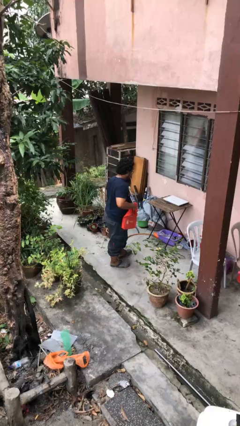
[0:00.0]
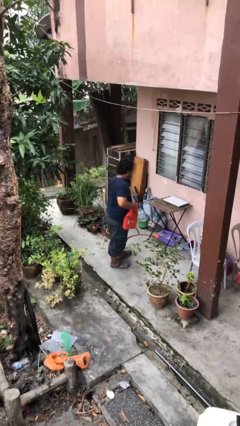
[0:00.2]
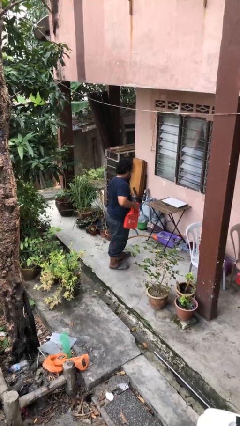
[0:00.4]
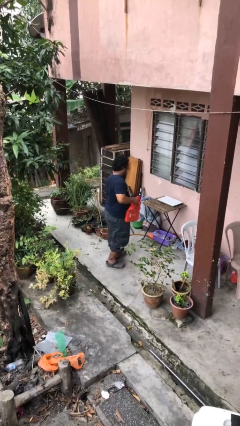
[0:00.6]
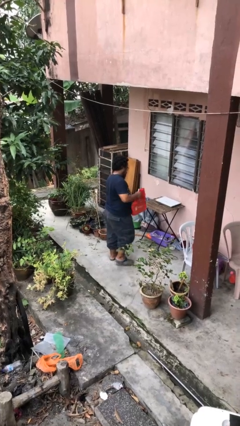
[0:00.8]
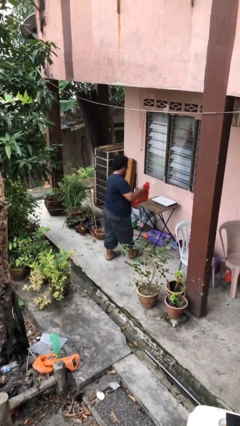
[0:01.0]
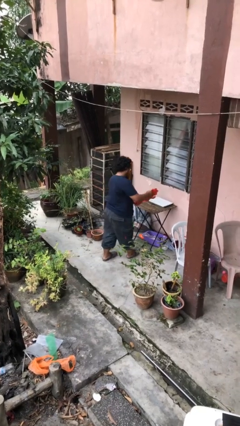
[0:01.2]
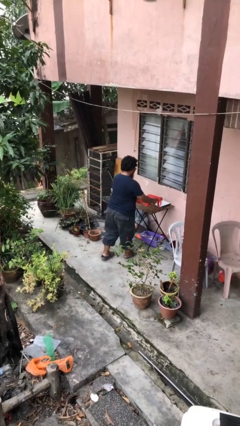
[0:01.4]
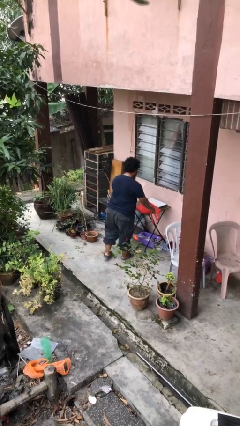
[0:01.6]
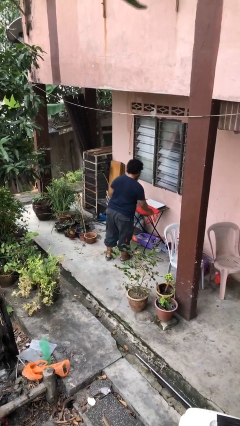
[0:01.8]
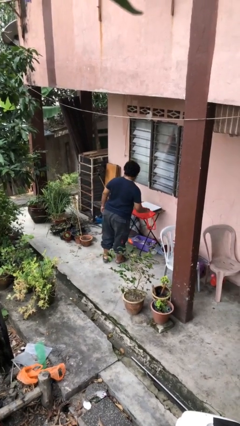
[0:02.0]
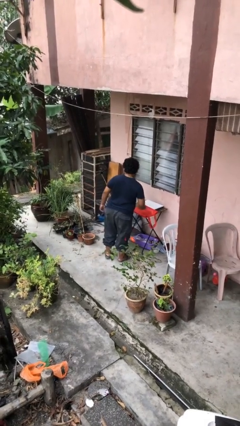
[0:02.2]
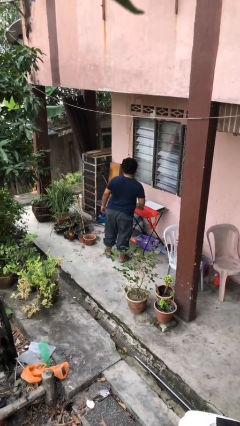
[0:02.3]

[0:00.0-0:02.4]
person puts down object on table

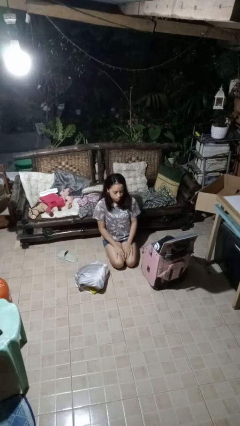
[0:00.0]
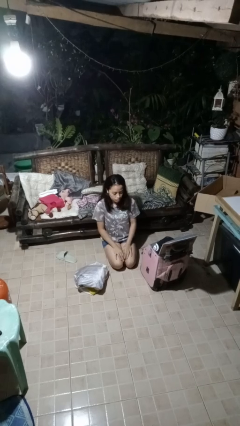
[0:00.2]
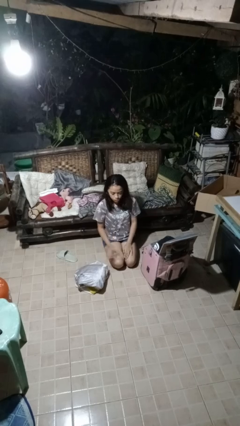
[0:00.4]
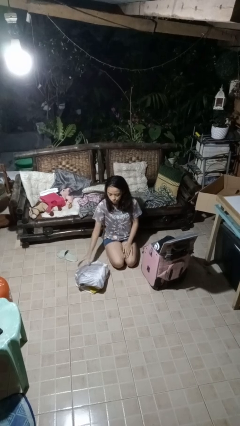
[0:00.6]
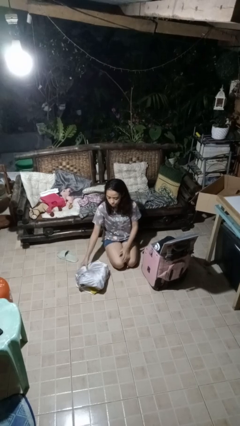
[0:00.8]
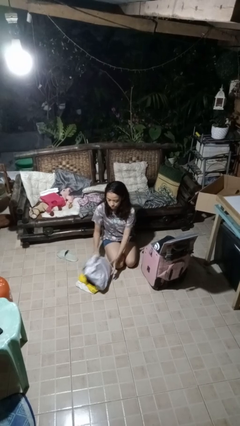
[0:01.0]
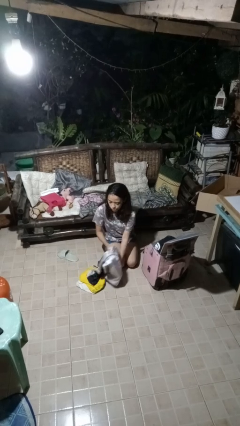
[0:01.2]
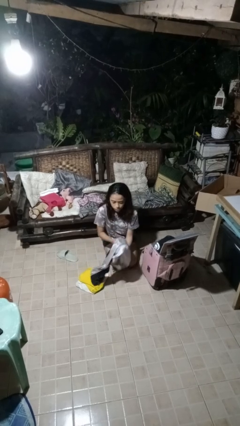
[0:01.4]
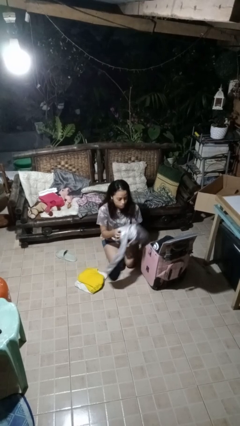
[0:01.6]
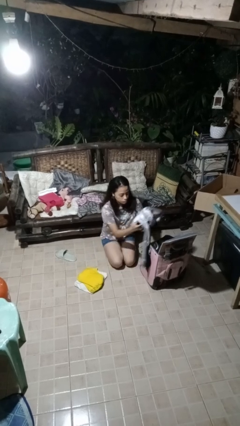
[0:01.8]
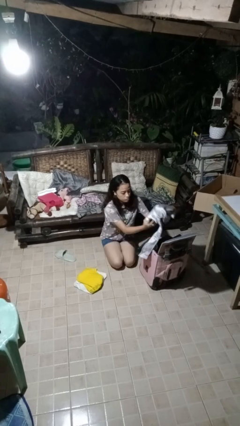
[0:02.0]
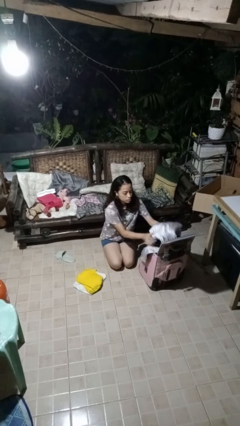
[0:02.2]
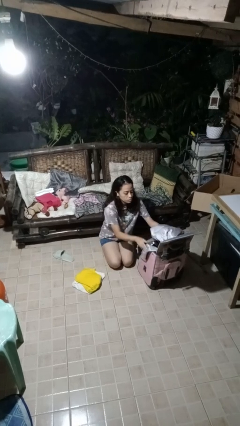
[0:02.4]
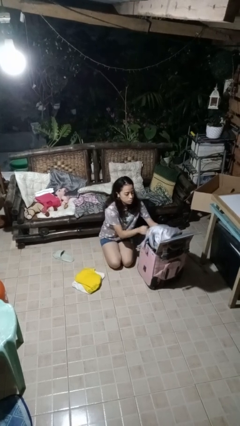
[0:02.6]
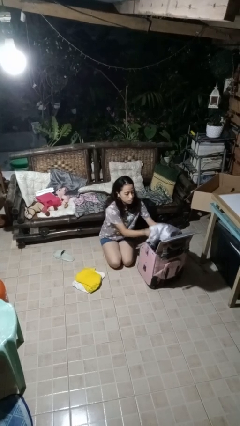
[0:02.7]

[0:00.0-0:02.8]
person loads clothes into suitcase

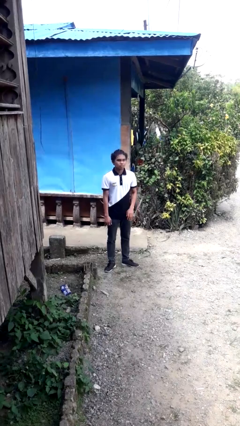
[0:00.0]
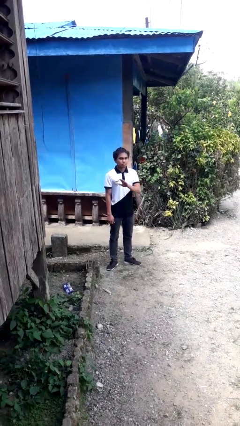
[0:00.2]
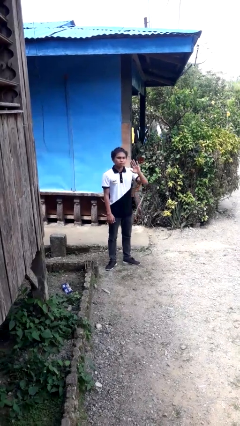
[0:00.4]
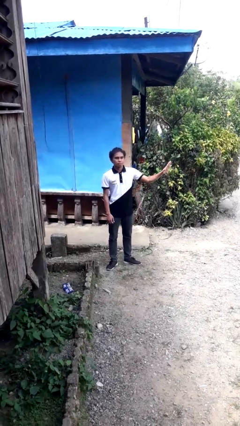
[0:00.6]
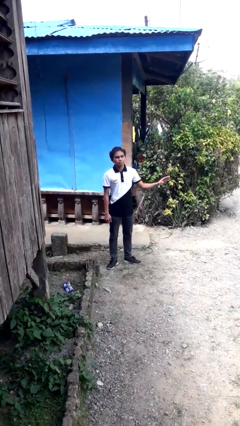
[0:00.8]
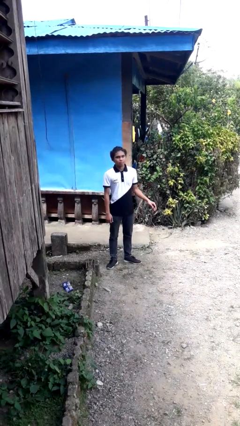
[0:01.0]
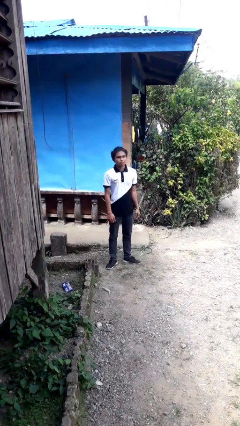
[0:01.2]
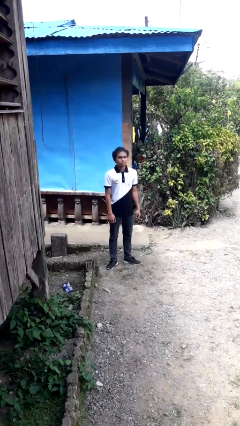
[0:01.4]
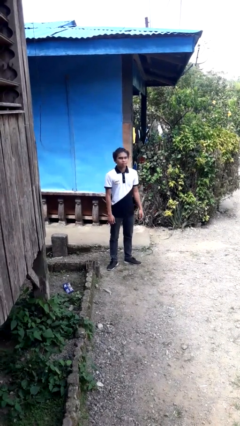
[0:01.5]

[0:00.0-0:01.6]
person gestures swipe left

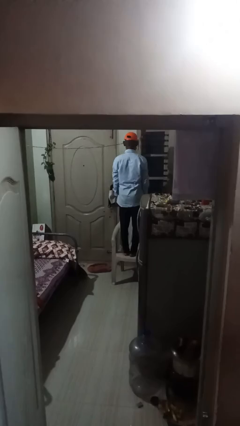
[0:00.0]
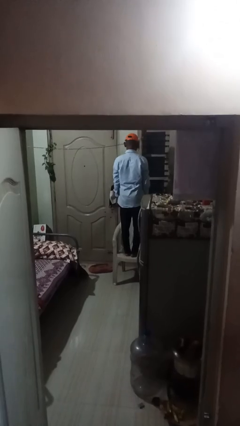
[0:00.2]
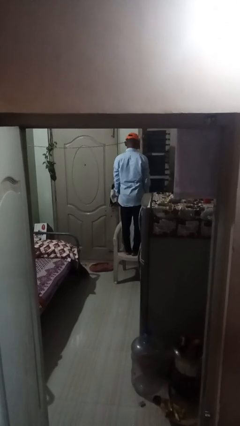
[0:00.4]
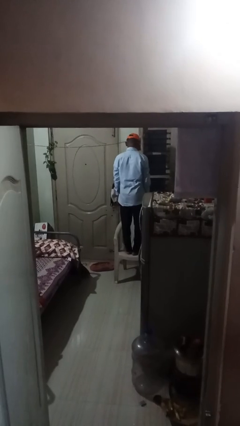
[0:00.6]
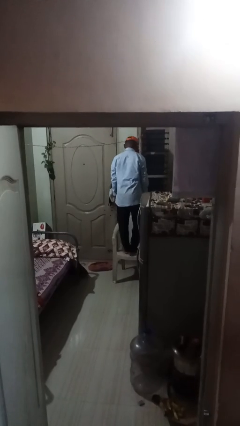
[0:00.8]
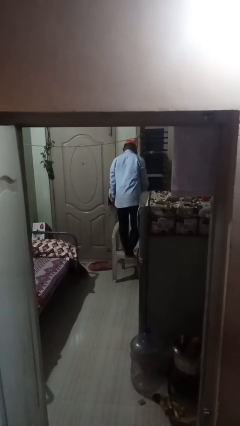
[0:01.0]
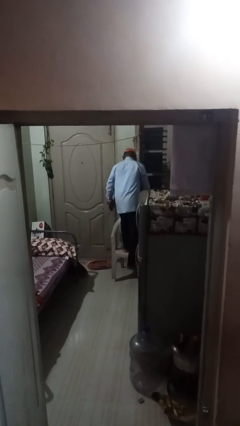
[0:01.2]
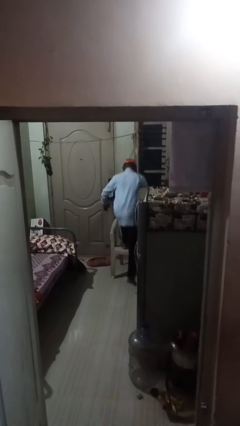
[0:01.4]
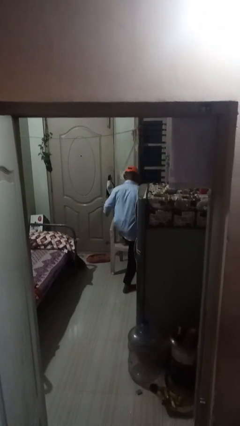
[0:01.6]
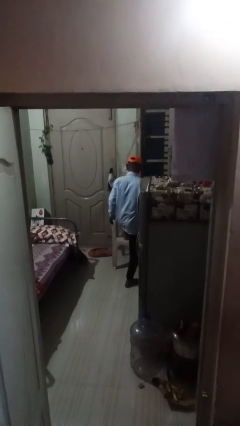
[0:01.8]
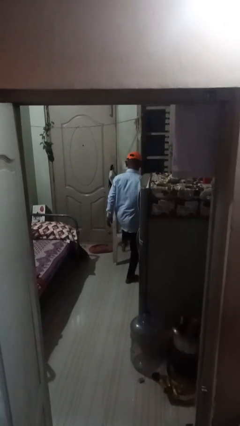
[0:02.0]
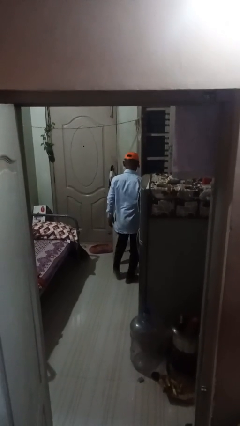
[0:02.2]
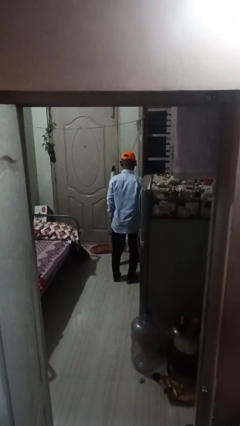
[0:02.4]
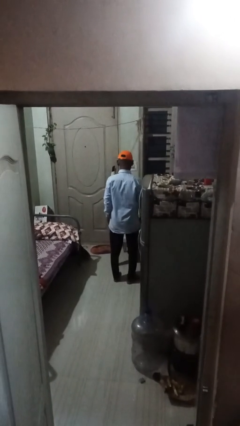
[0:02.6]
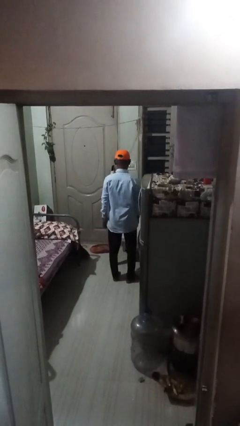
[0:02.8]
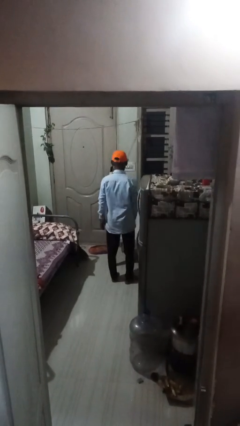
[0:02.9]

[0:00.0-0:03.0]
person climbs off chair

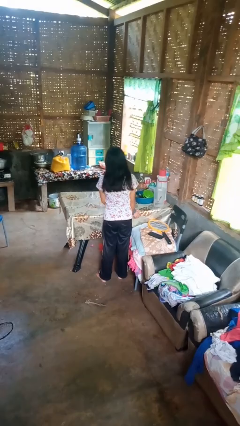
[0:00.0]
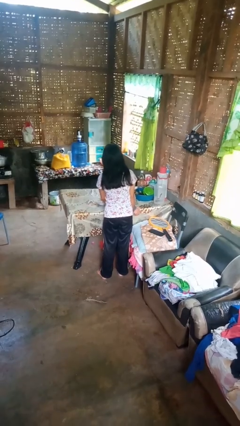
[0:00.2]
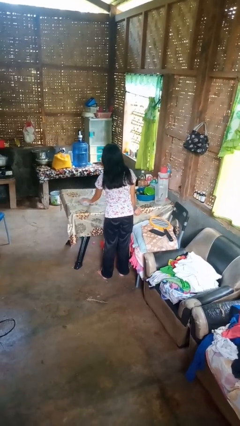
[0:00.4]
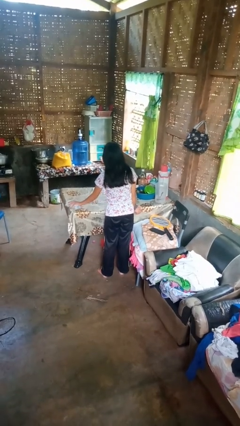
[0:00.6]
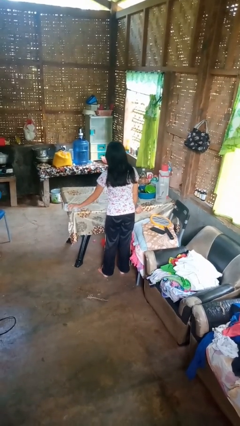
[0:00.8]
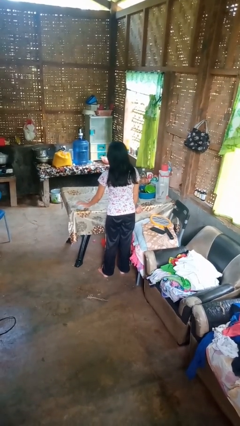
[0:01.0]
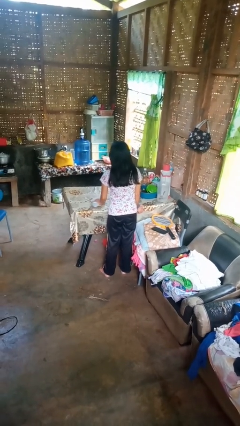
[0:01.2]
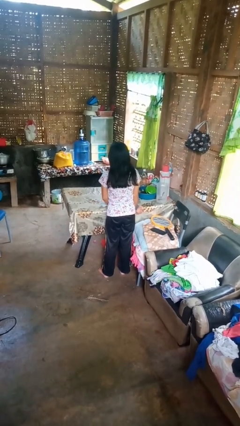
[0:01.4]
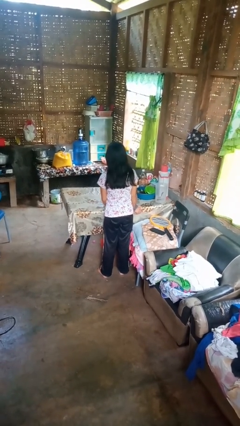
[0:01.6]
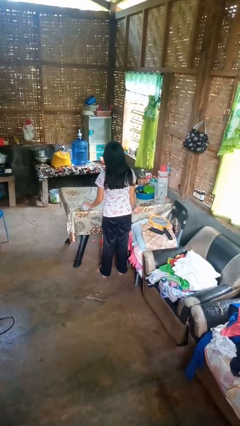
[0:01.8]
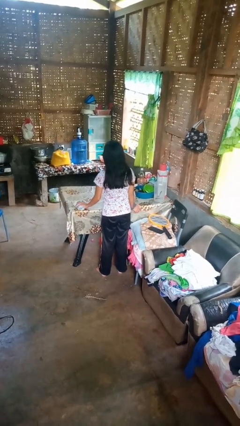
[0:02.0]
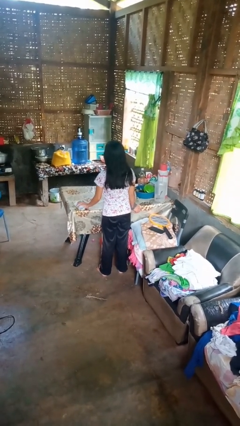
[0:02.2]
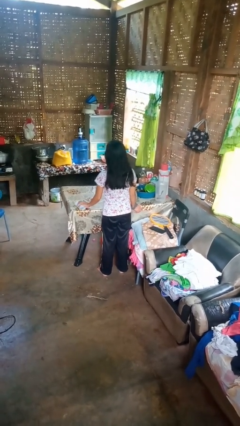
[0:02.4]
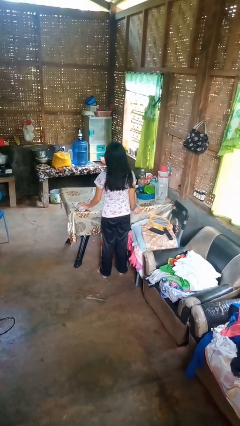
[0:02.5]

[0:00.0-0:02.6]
person cleans table with rag

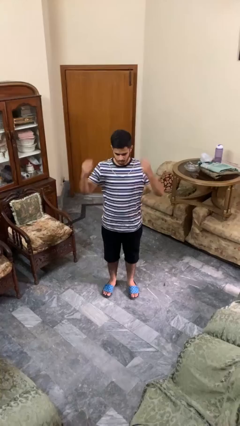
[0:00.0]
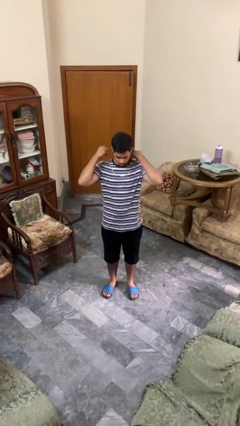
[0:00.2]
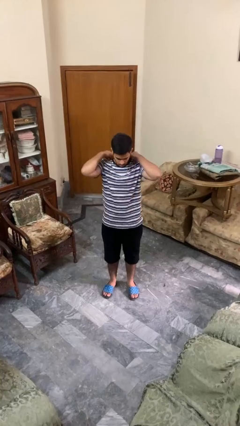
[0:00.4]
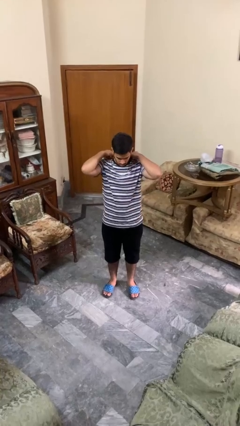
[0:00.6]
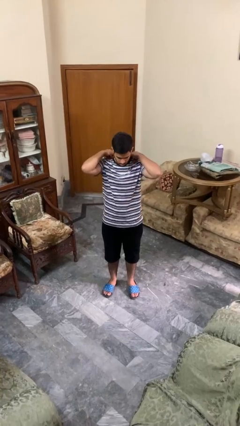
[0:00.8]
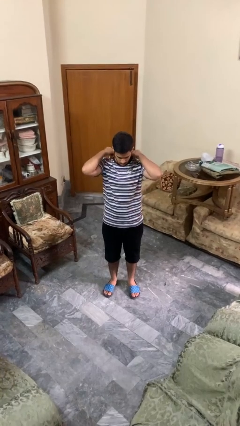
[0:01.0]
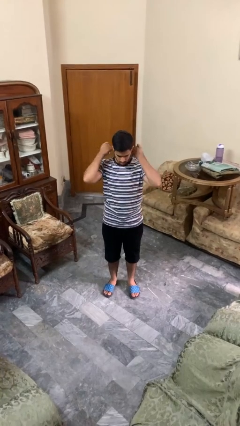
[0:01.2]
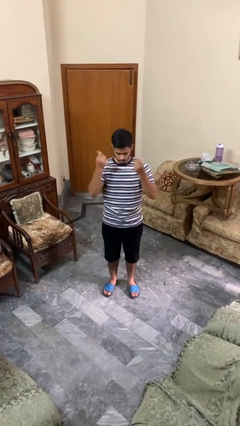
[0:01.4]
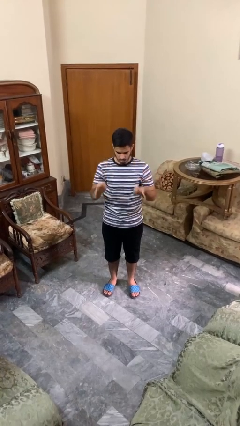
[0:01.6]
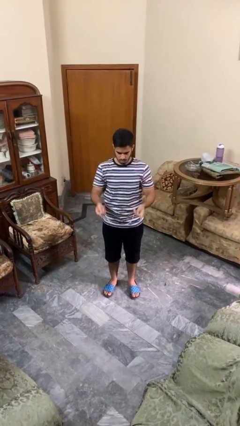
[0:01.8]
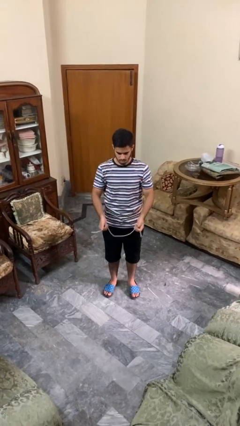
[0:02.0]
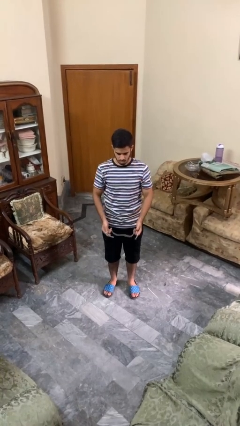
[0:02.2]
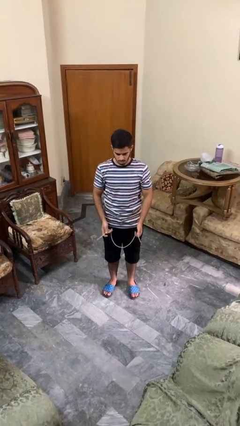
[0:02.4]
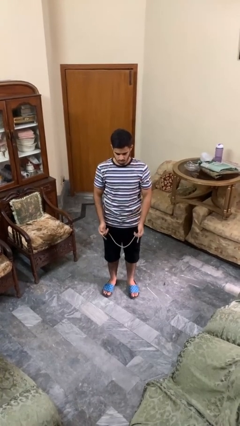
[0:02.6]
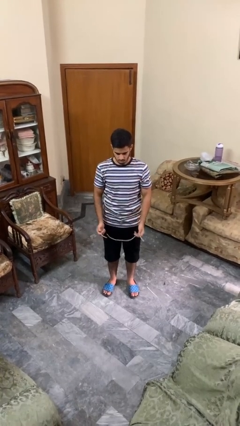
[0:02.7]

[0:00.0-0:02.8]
person takes off necklace

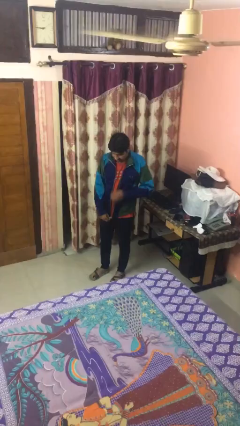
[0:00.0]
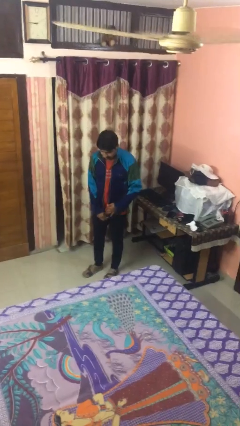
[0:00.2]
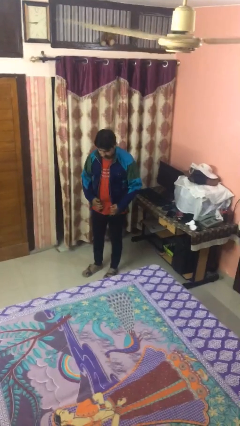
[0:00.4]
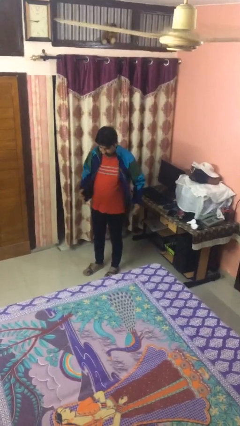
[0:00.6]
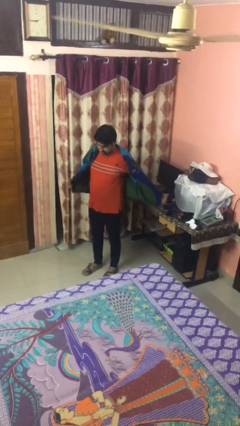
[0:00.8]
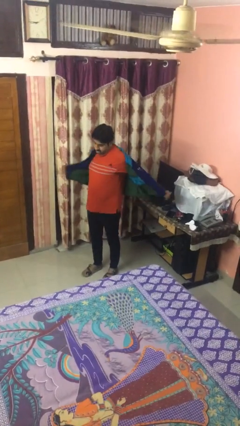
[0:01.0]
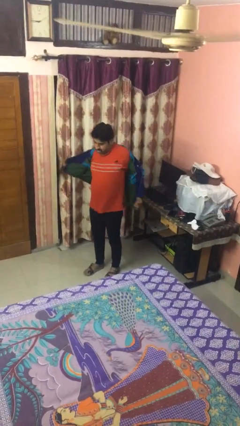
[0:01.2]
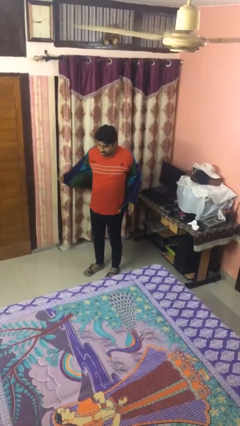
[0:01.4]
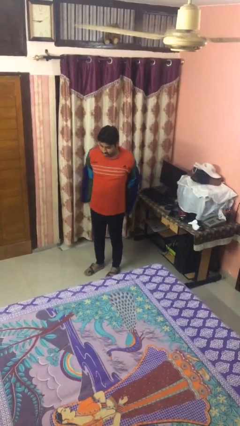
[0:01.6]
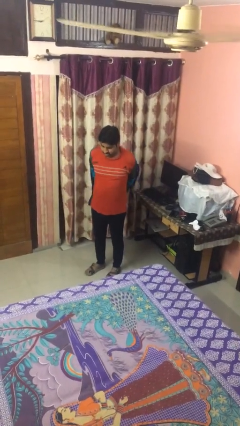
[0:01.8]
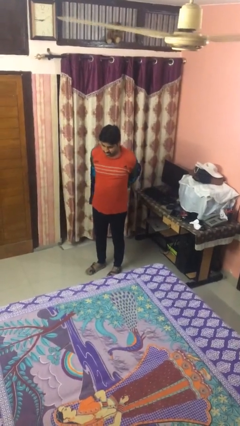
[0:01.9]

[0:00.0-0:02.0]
person takes off jacket
